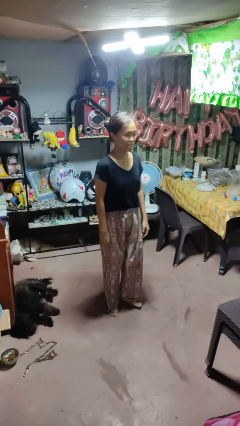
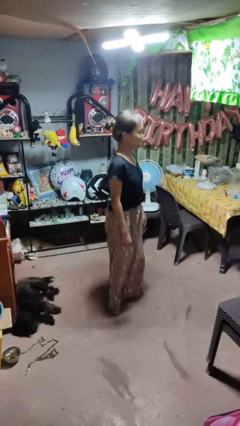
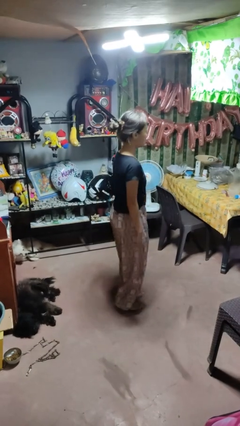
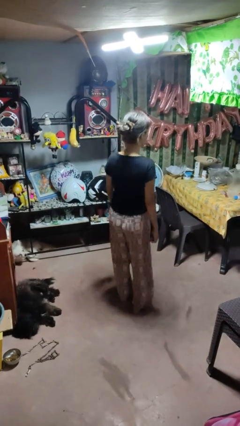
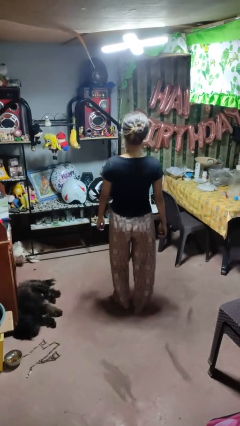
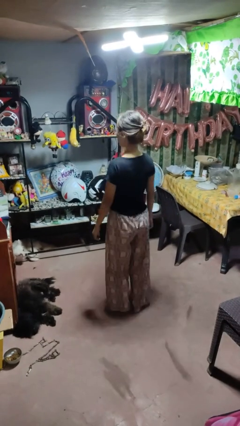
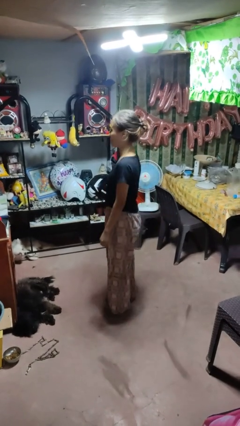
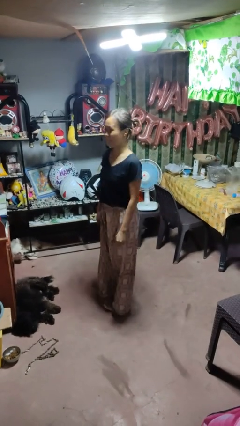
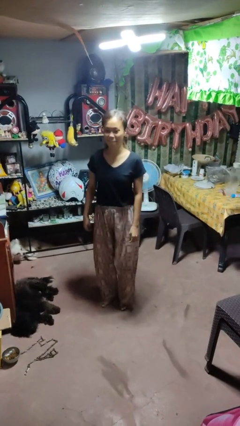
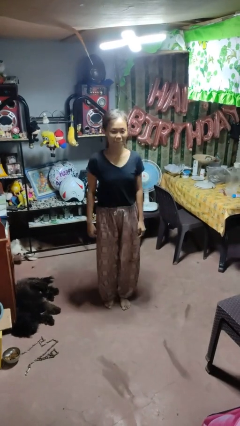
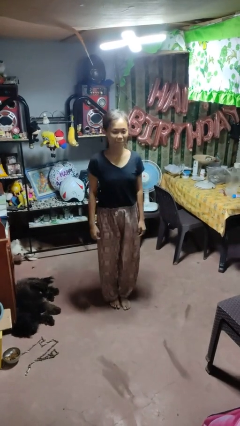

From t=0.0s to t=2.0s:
person twirls

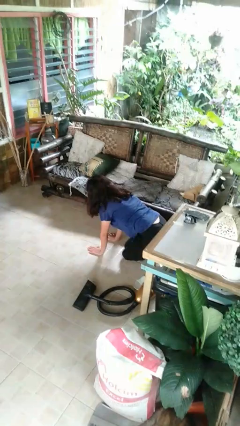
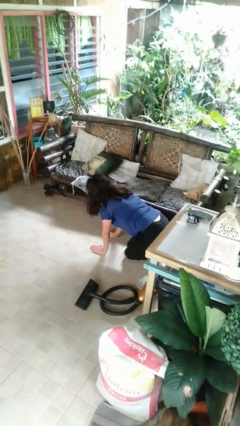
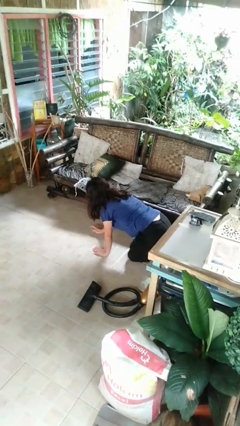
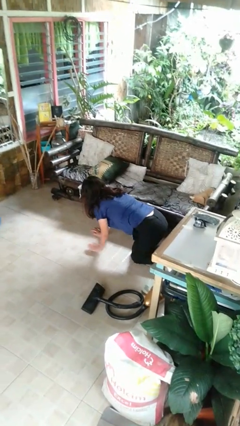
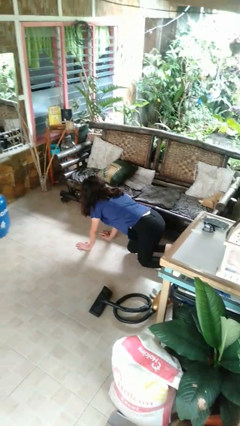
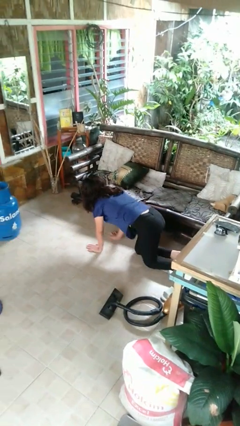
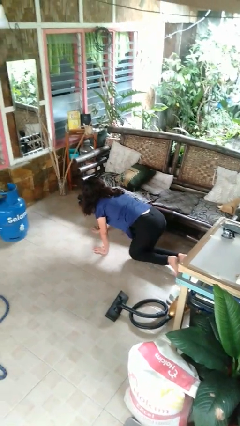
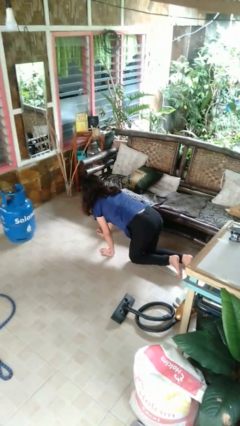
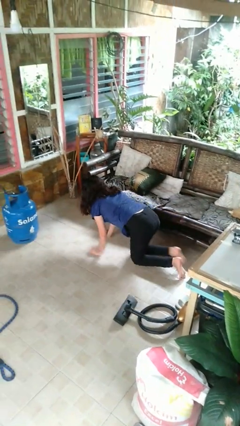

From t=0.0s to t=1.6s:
person crawls

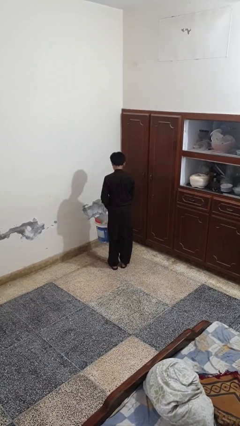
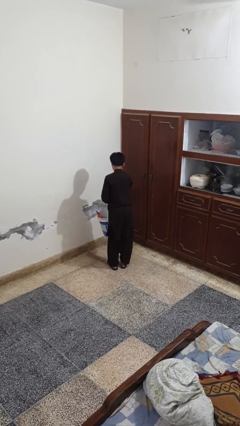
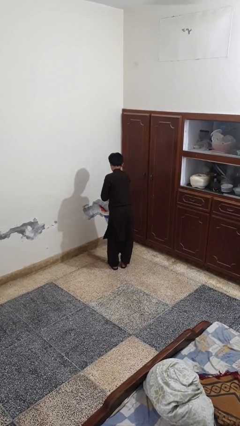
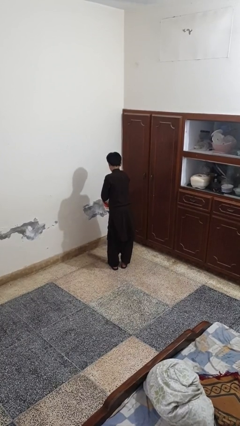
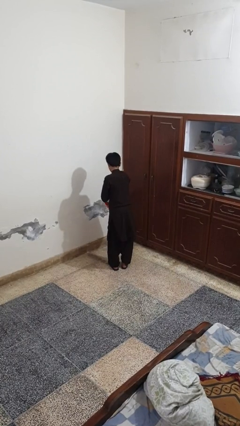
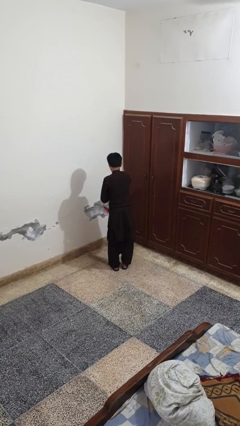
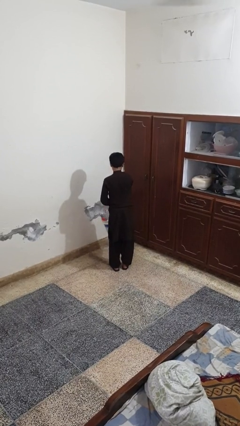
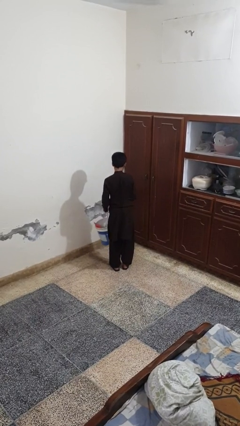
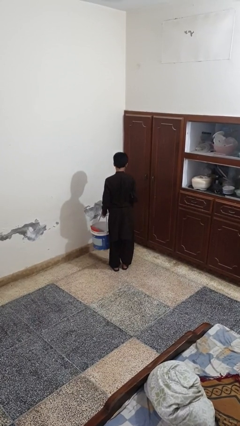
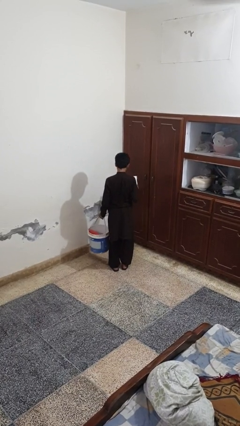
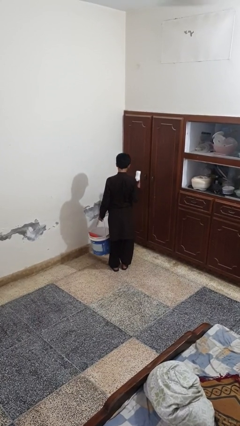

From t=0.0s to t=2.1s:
person takes object from basket

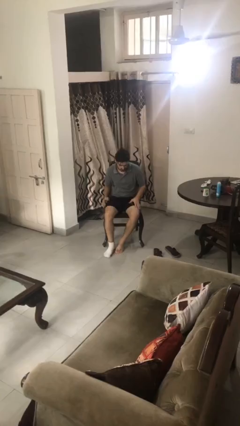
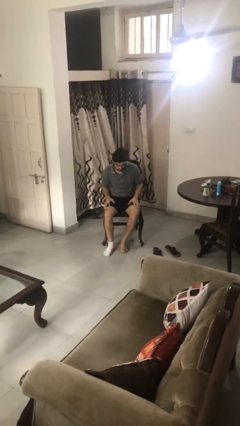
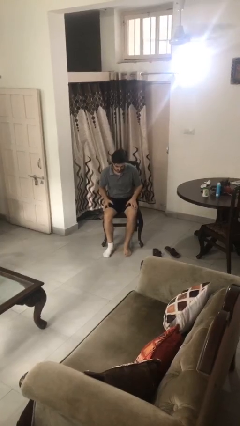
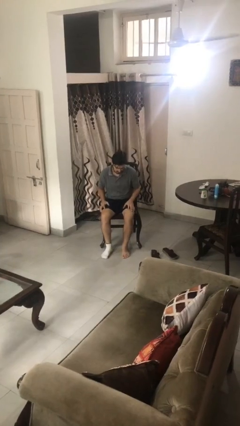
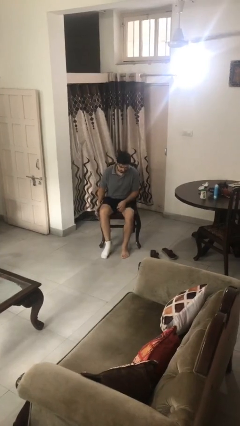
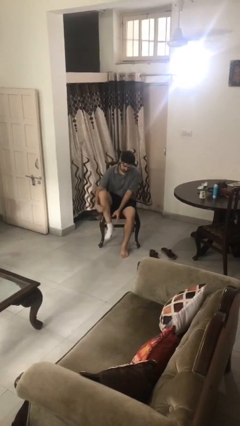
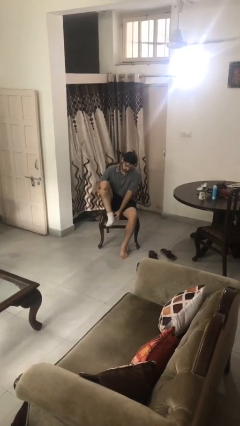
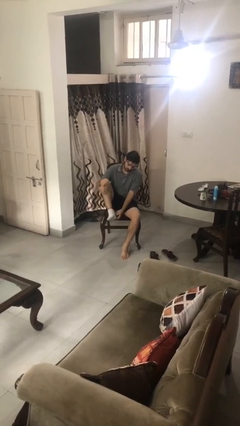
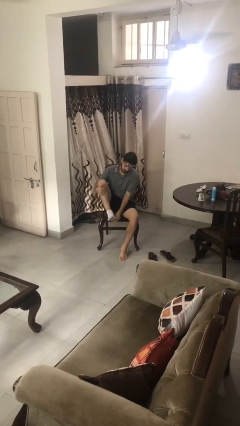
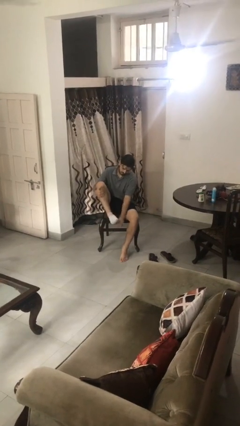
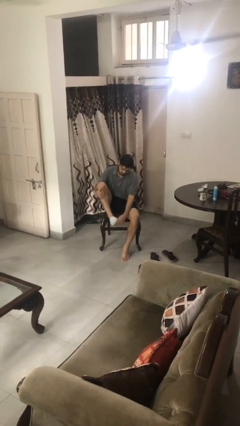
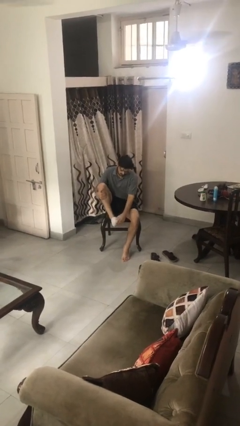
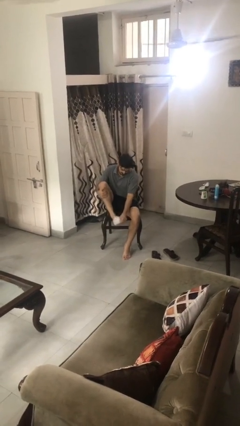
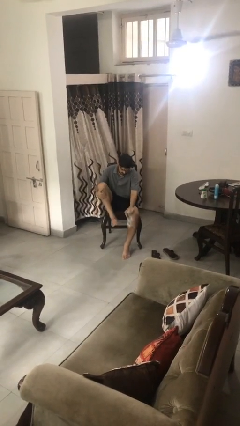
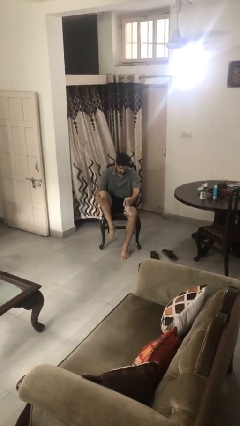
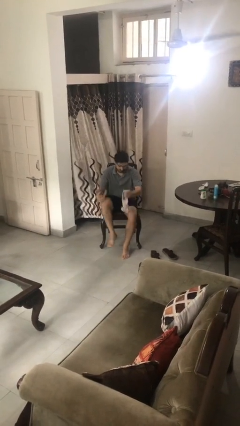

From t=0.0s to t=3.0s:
person takes off socks

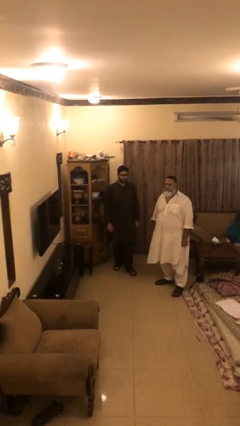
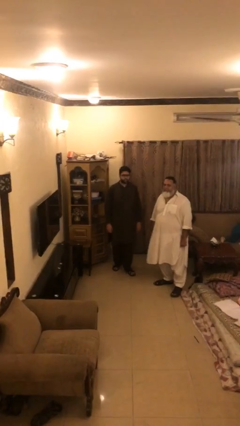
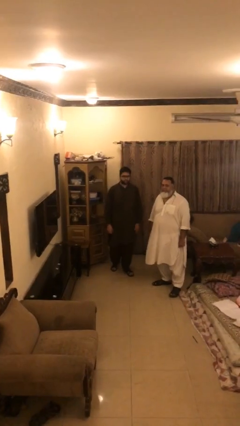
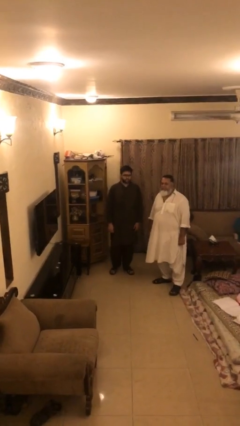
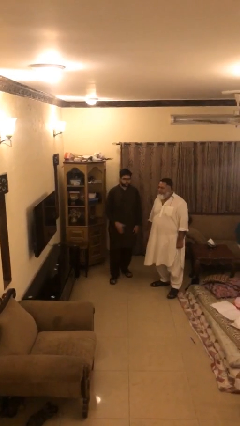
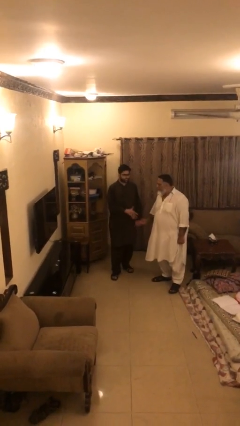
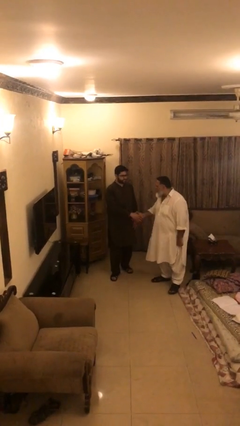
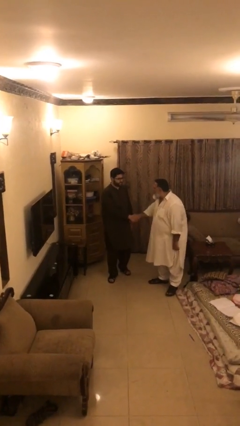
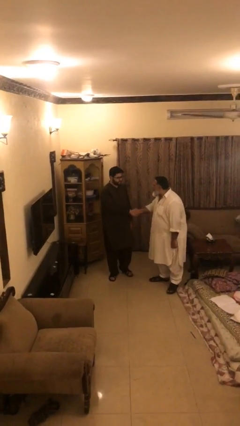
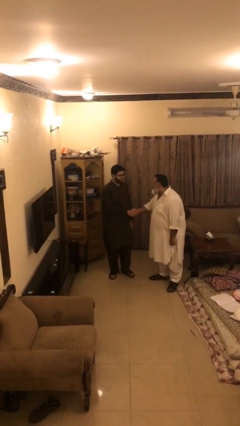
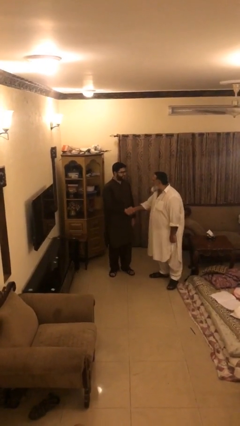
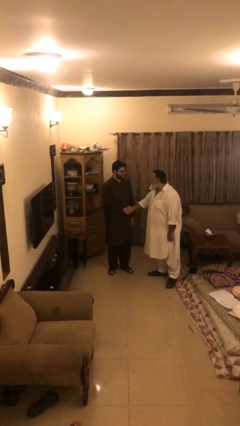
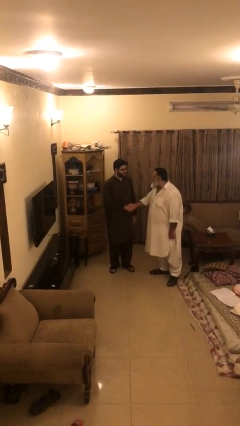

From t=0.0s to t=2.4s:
person shakes hand

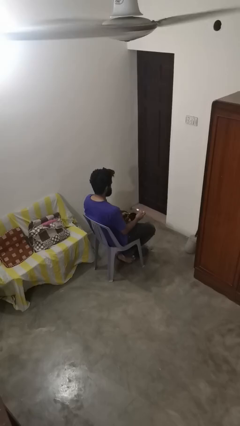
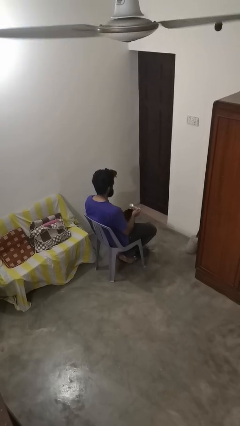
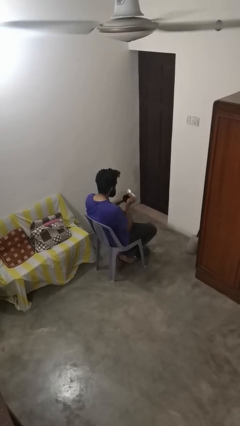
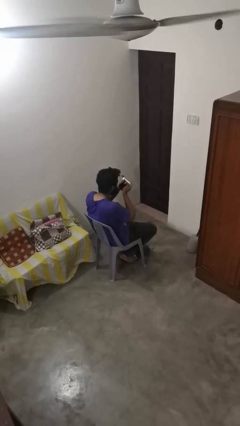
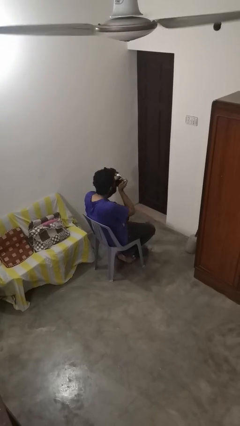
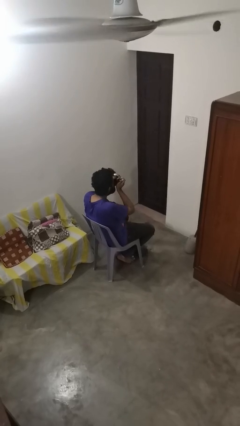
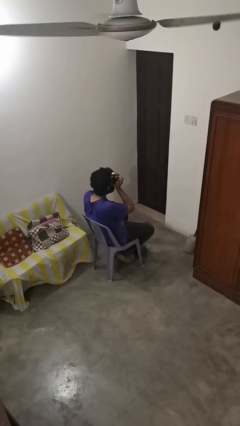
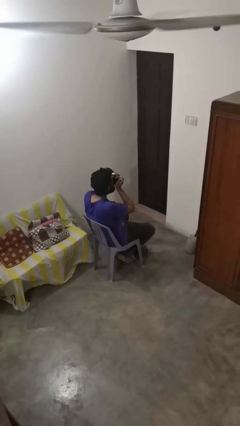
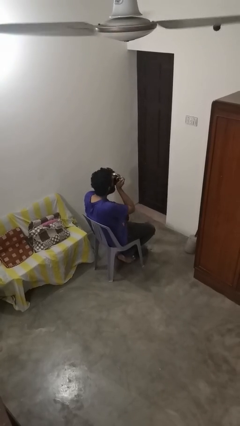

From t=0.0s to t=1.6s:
person drinks from mug

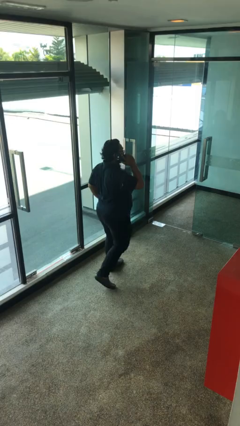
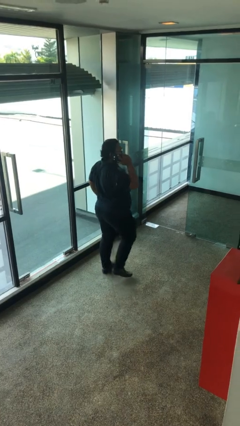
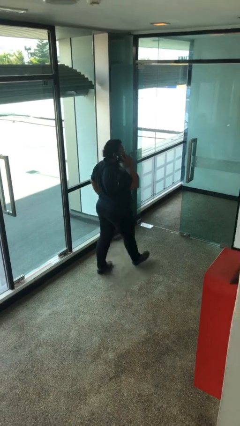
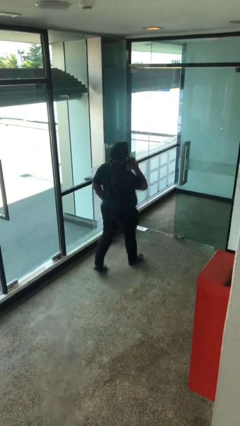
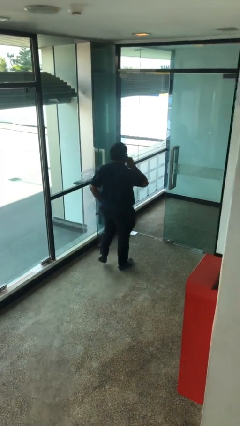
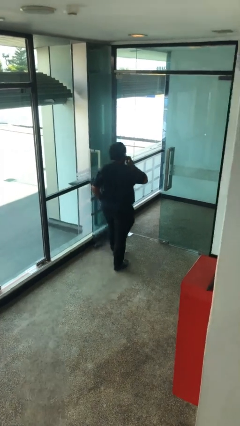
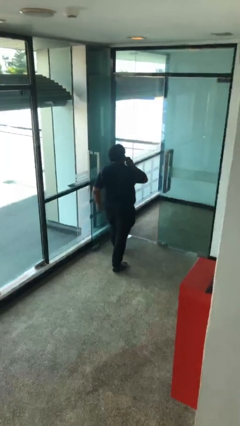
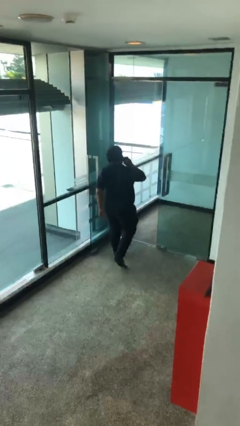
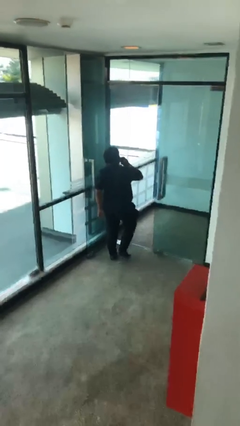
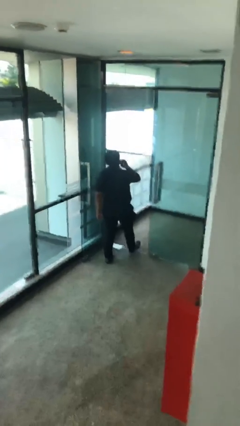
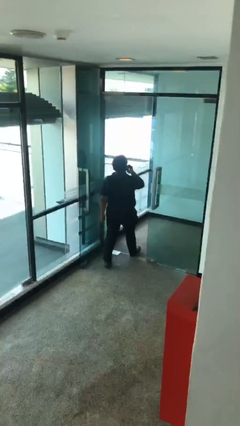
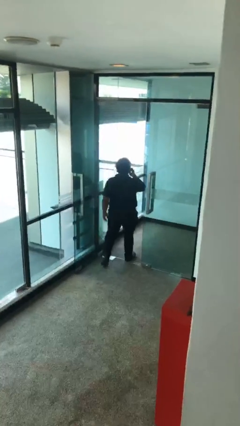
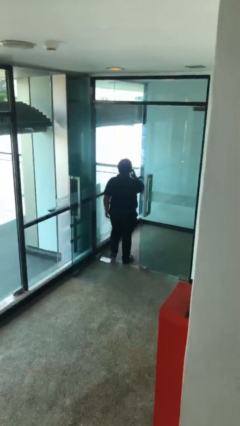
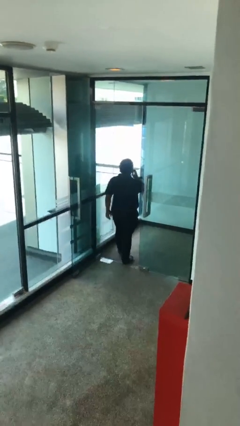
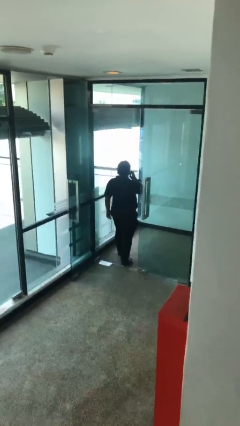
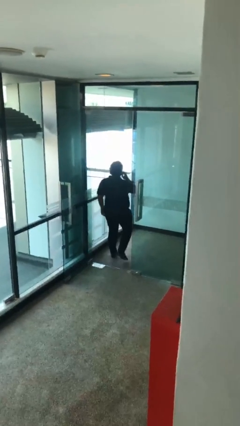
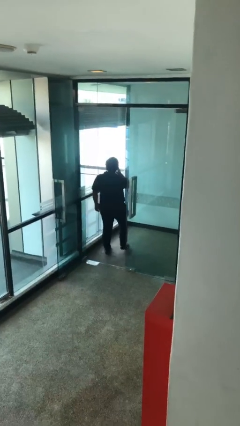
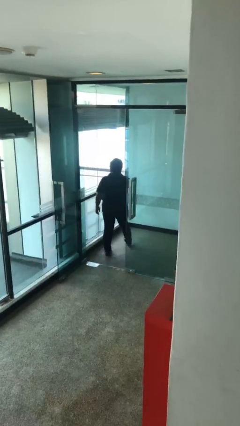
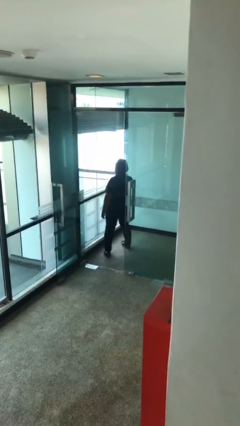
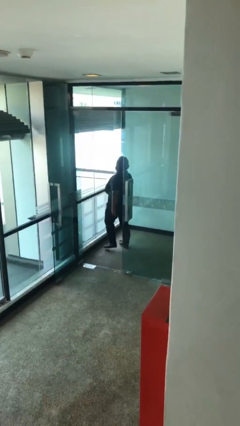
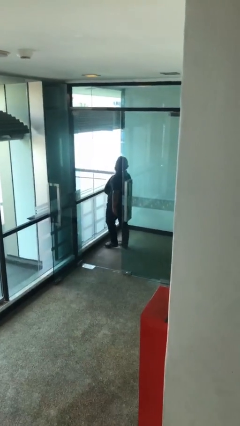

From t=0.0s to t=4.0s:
person exits scene through structure
